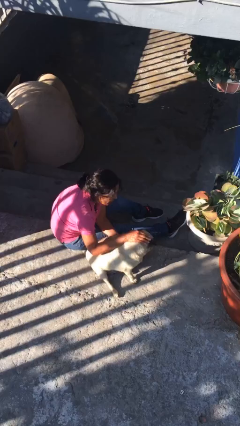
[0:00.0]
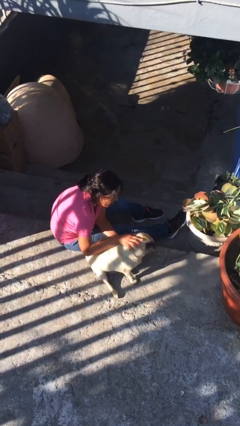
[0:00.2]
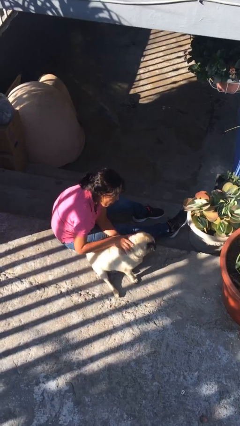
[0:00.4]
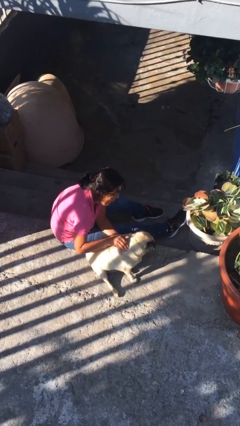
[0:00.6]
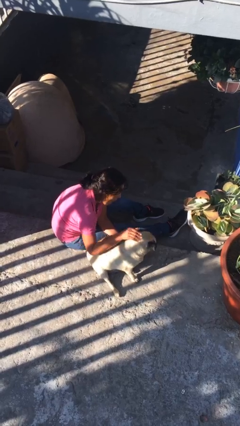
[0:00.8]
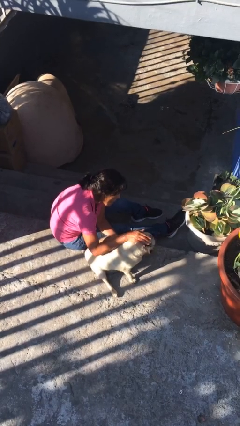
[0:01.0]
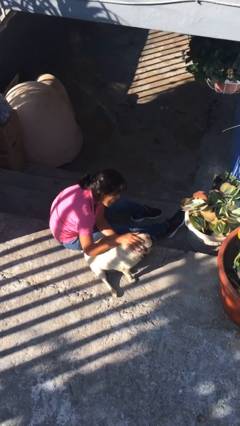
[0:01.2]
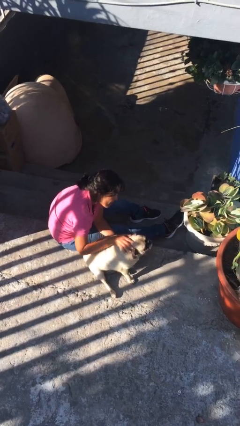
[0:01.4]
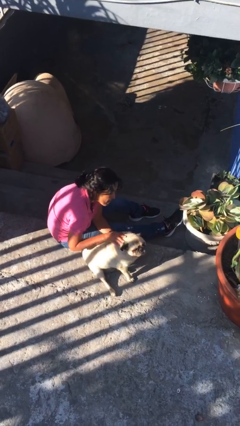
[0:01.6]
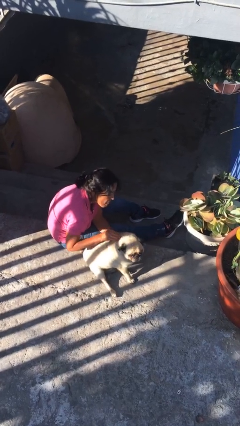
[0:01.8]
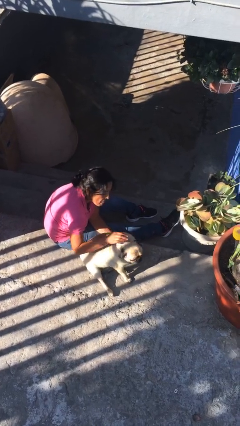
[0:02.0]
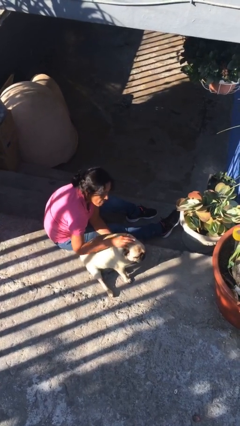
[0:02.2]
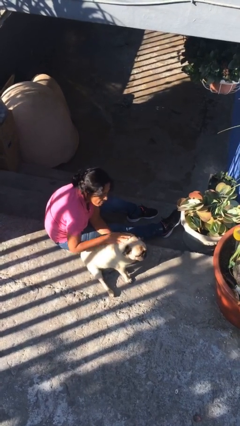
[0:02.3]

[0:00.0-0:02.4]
person pets dog

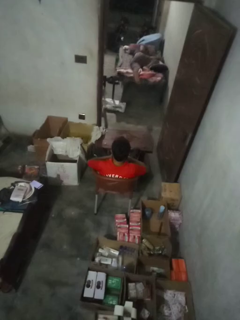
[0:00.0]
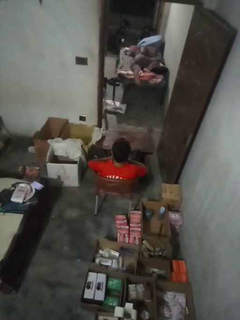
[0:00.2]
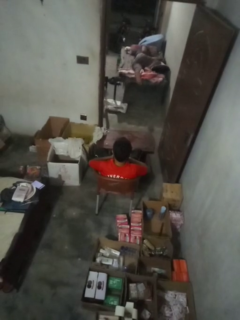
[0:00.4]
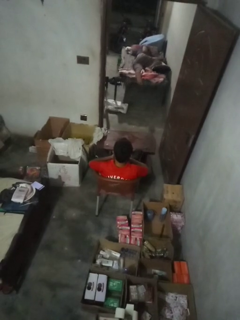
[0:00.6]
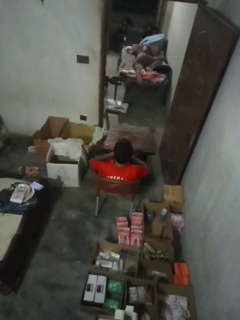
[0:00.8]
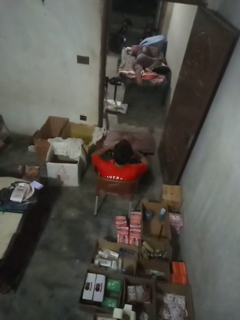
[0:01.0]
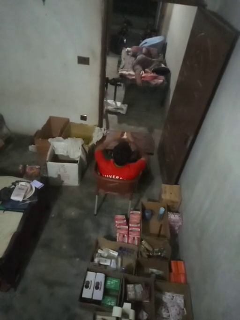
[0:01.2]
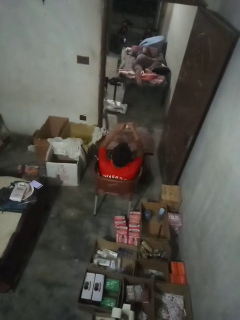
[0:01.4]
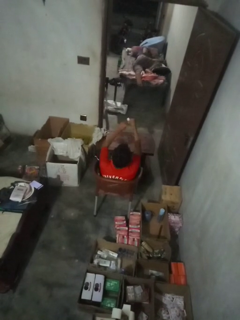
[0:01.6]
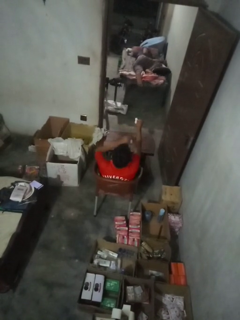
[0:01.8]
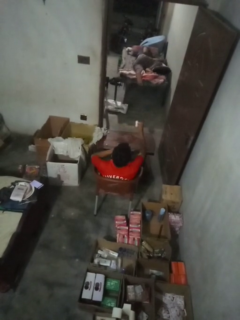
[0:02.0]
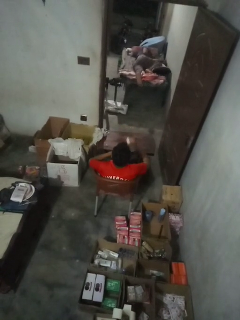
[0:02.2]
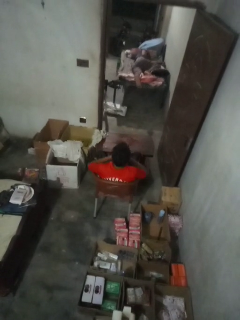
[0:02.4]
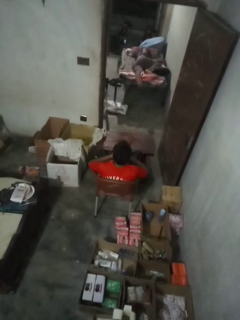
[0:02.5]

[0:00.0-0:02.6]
person tears paper

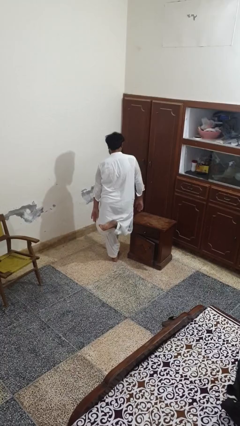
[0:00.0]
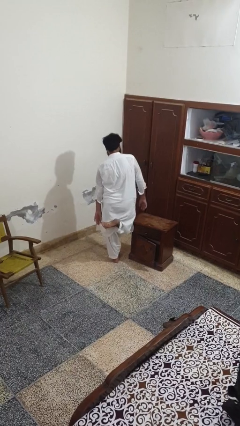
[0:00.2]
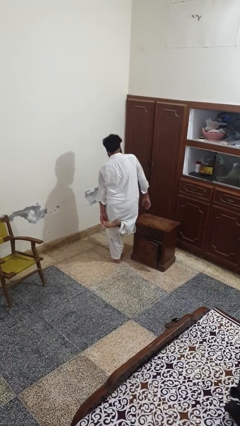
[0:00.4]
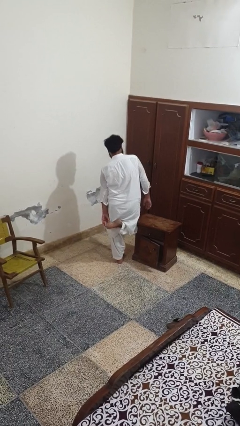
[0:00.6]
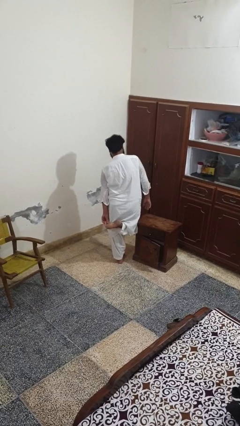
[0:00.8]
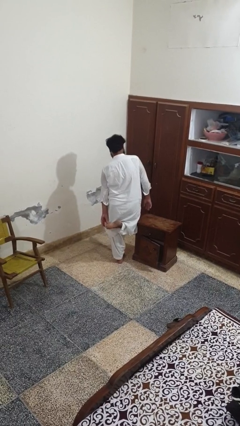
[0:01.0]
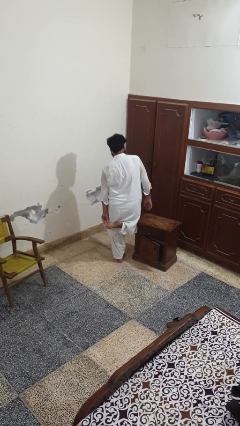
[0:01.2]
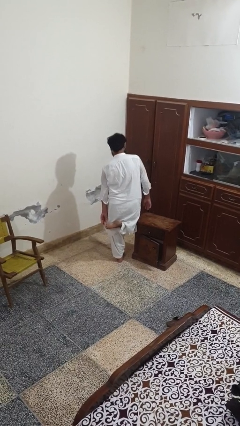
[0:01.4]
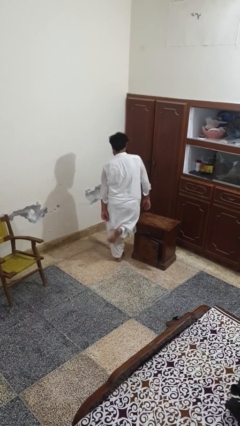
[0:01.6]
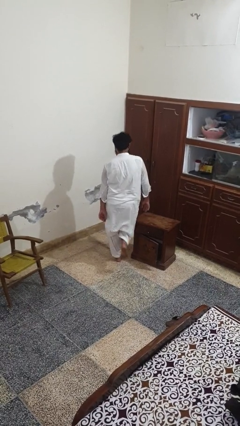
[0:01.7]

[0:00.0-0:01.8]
person stubs toe

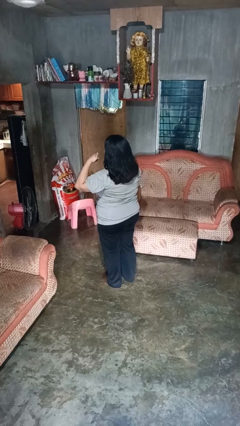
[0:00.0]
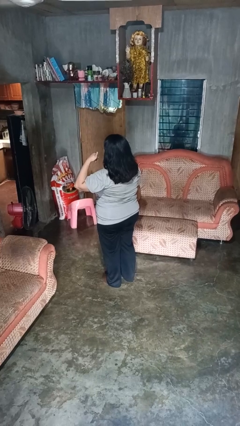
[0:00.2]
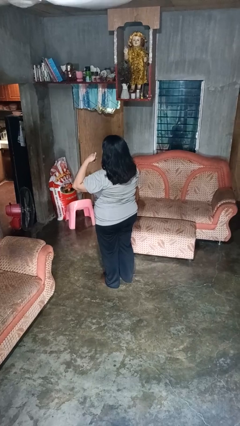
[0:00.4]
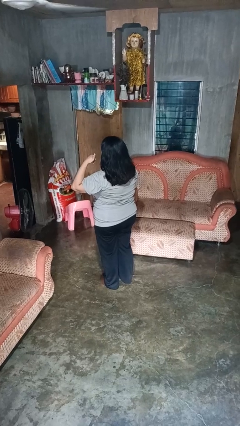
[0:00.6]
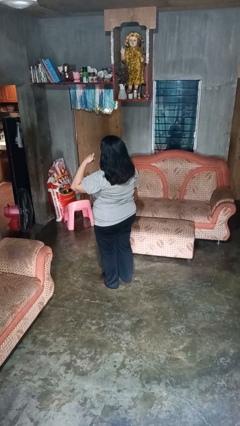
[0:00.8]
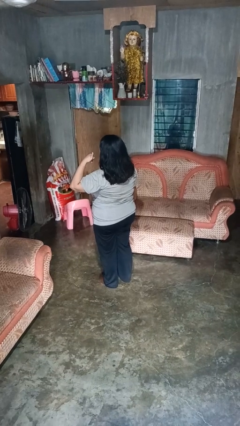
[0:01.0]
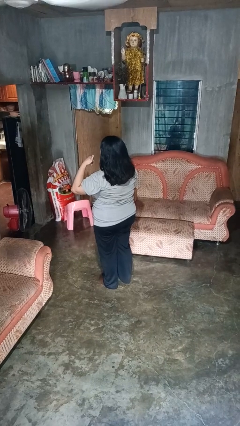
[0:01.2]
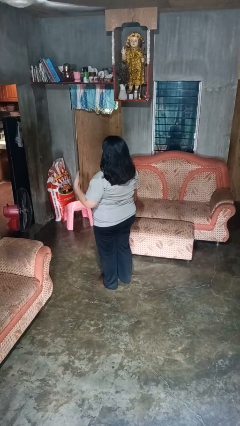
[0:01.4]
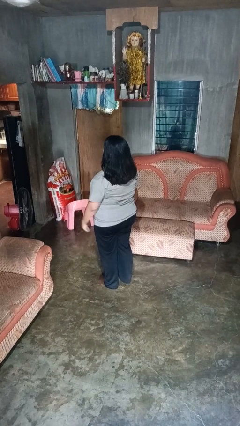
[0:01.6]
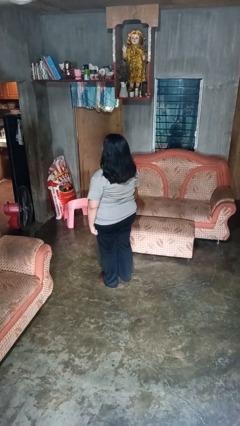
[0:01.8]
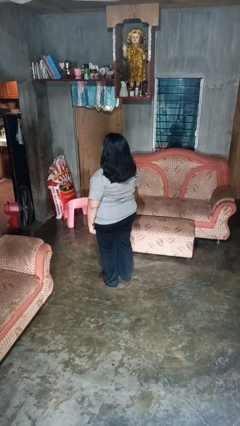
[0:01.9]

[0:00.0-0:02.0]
person gestures call me

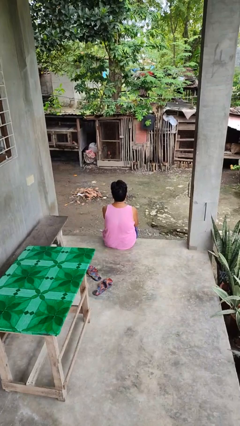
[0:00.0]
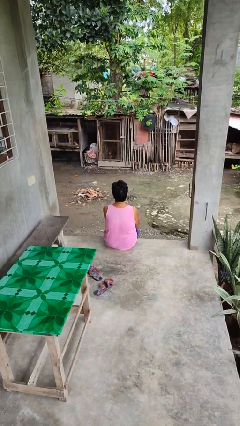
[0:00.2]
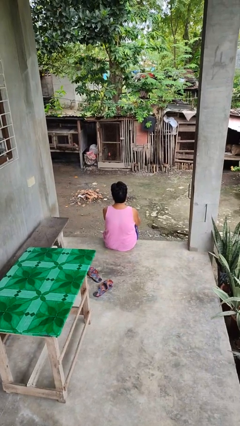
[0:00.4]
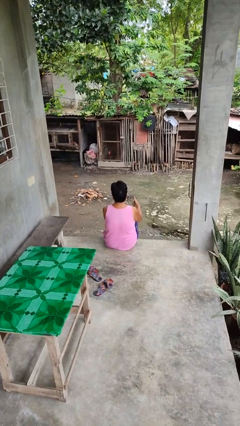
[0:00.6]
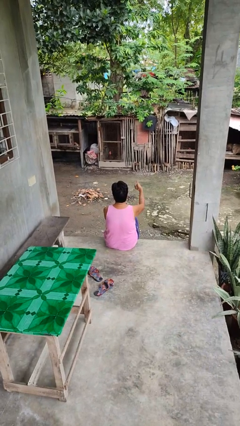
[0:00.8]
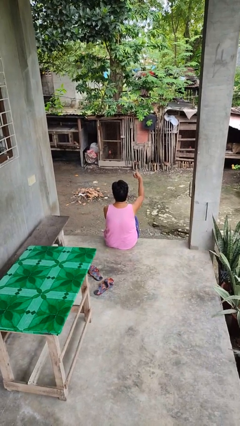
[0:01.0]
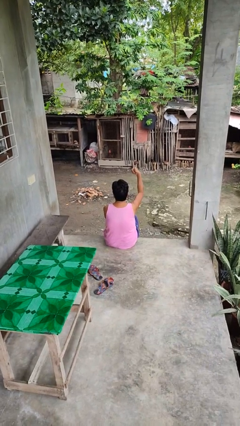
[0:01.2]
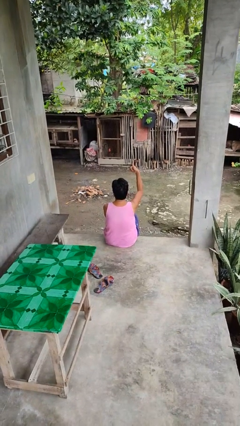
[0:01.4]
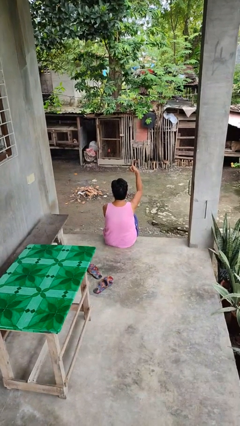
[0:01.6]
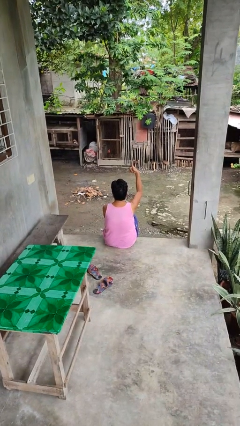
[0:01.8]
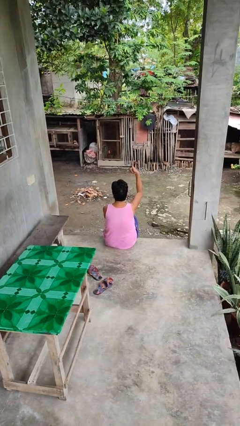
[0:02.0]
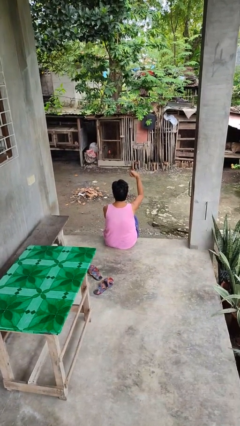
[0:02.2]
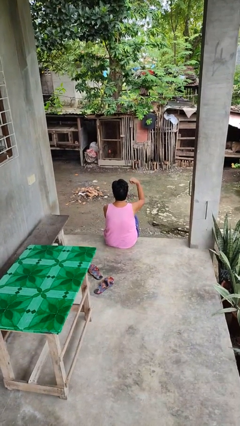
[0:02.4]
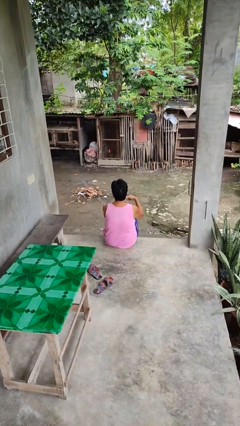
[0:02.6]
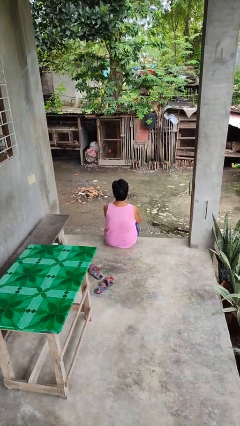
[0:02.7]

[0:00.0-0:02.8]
person gestures thumbs up

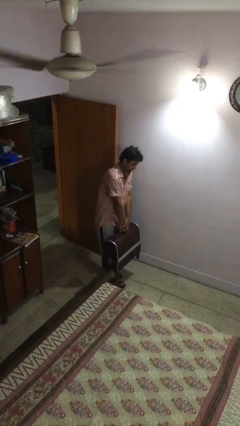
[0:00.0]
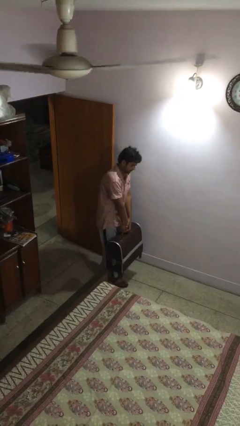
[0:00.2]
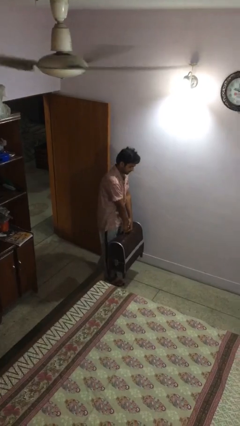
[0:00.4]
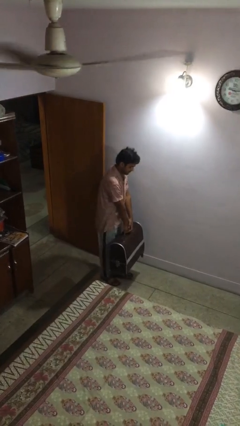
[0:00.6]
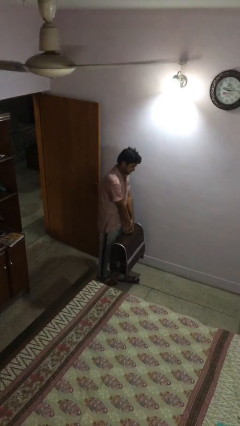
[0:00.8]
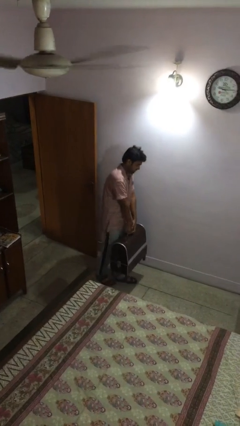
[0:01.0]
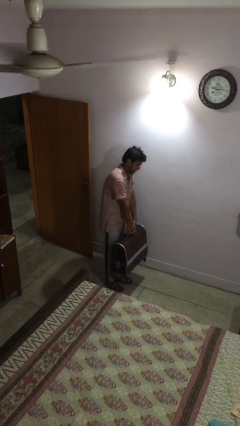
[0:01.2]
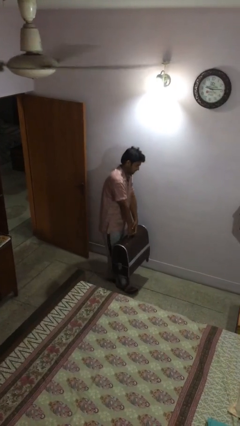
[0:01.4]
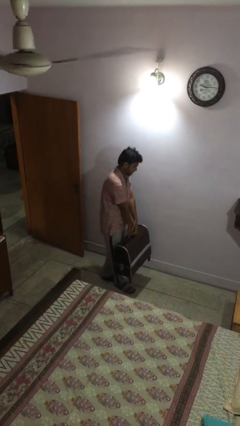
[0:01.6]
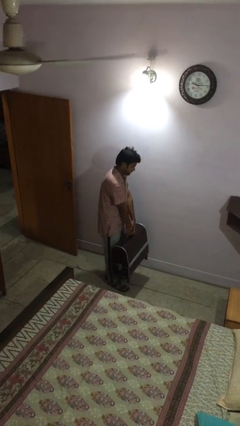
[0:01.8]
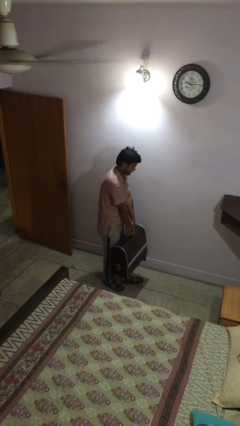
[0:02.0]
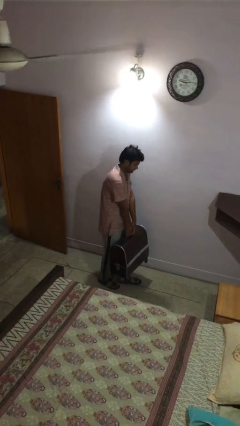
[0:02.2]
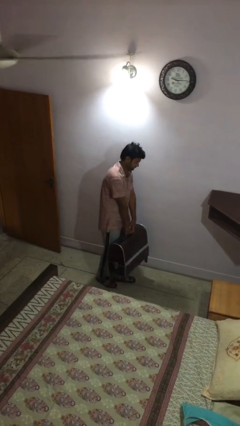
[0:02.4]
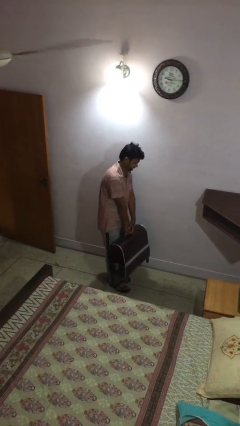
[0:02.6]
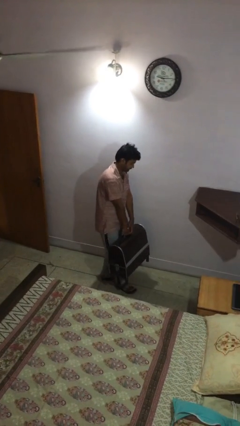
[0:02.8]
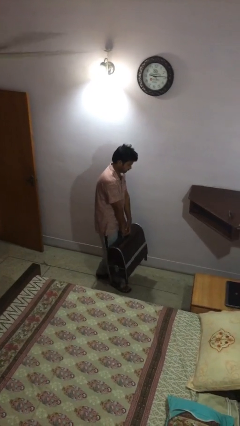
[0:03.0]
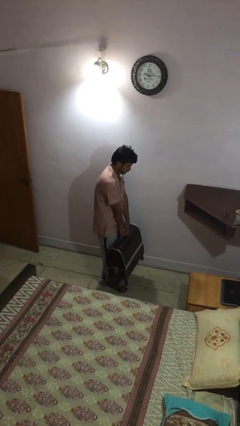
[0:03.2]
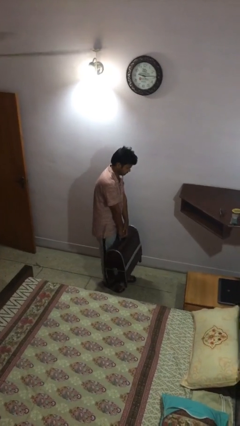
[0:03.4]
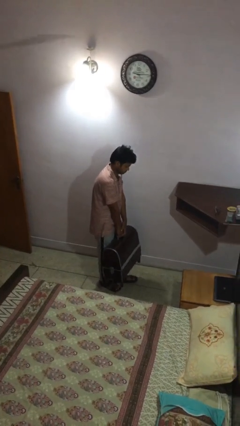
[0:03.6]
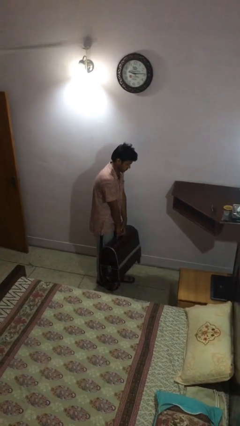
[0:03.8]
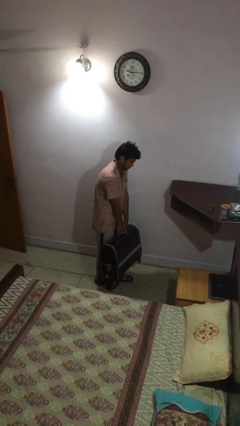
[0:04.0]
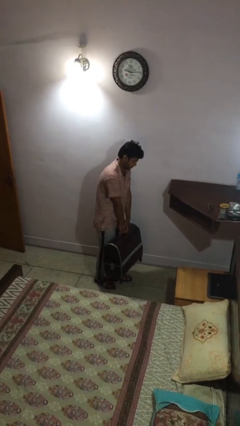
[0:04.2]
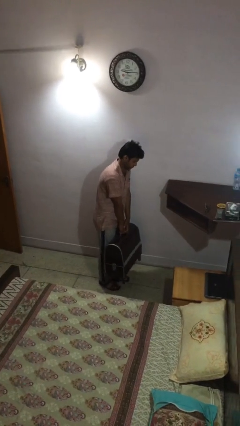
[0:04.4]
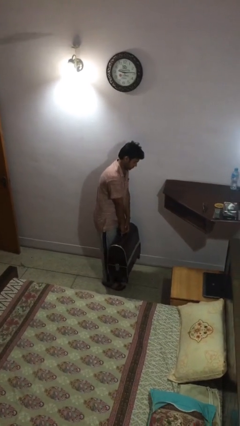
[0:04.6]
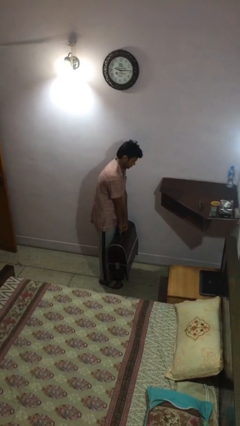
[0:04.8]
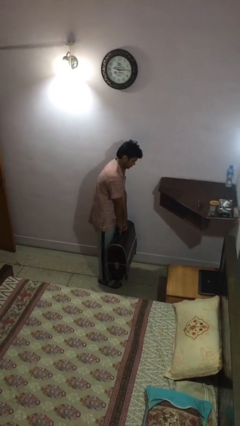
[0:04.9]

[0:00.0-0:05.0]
person carries heavy object

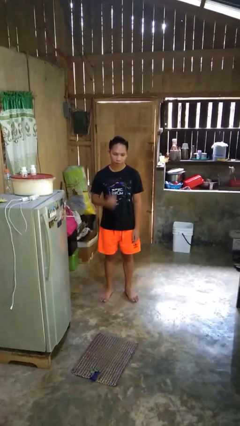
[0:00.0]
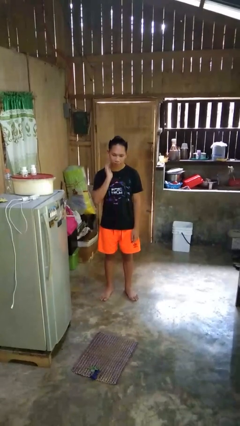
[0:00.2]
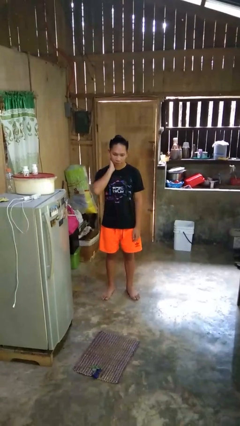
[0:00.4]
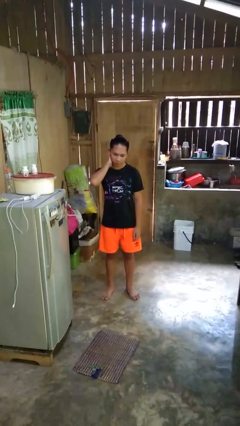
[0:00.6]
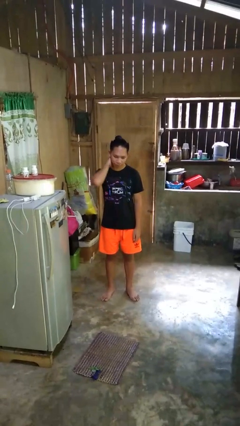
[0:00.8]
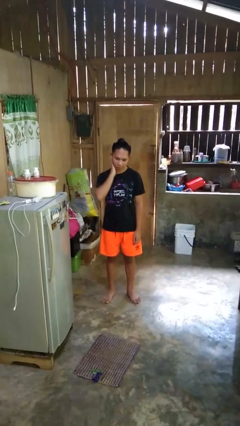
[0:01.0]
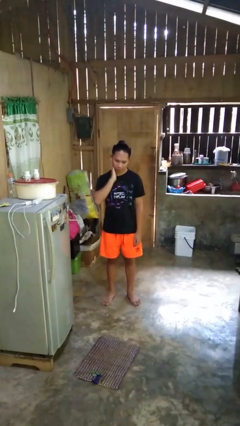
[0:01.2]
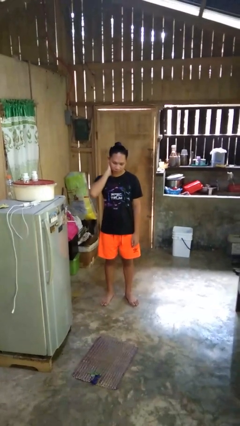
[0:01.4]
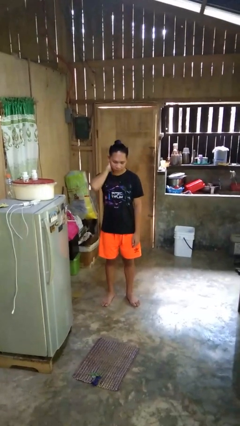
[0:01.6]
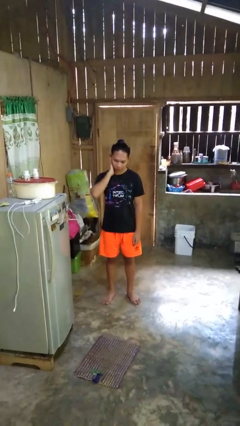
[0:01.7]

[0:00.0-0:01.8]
person rubs neck

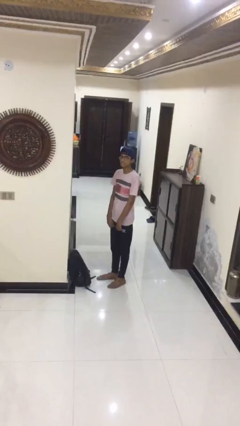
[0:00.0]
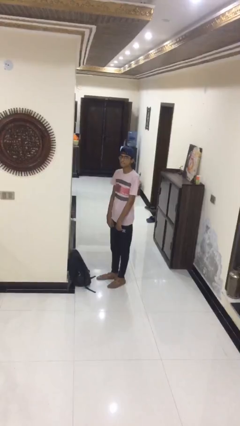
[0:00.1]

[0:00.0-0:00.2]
person puts down object on floor
